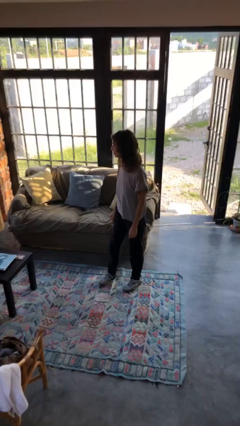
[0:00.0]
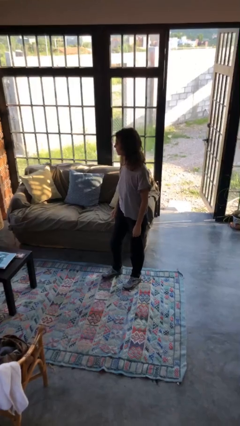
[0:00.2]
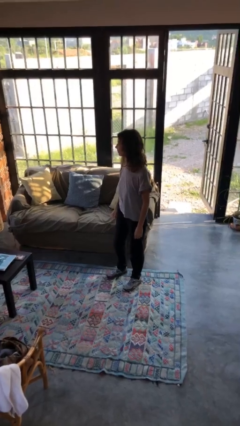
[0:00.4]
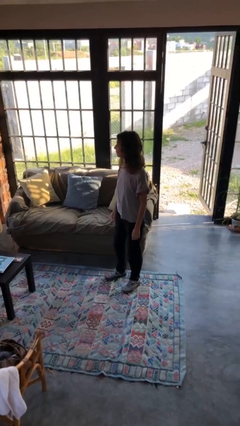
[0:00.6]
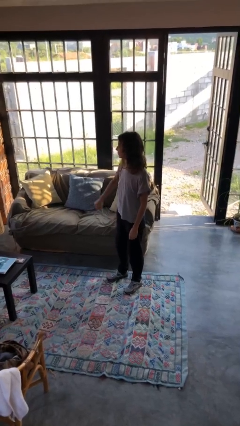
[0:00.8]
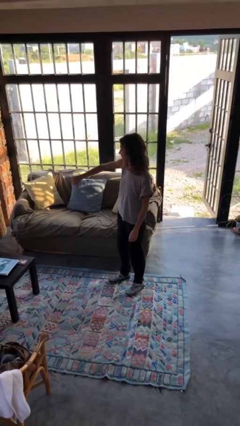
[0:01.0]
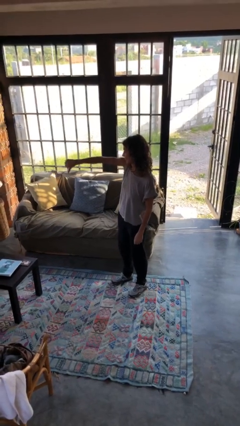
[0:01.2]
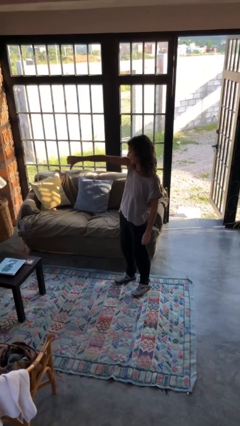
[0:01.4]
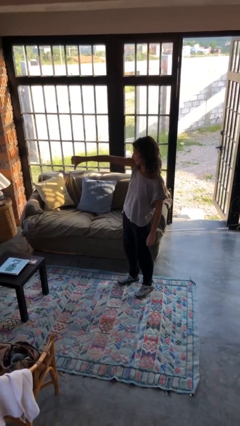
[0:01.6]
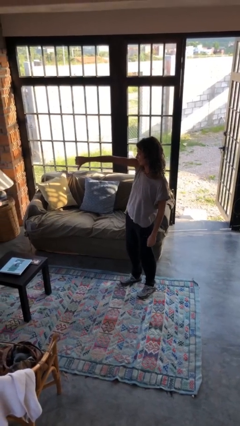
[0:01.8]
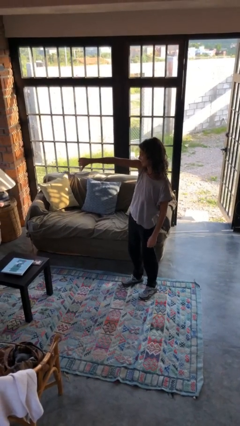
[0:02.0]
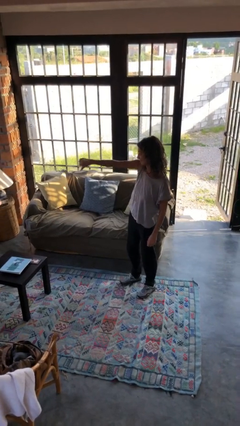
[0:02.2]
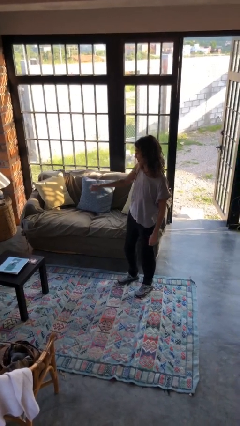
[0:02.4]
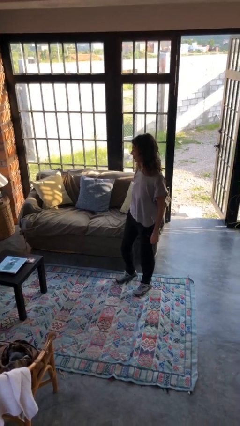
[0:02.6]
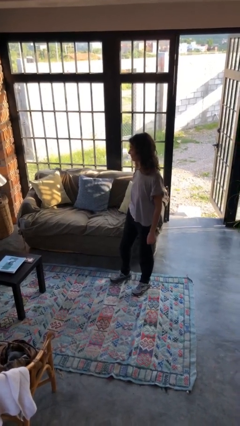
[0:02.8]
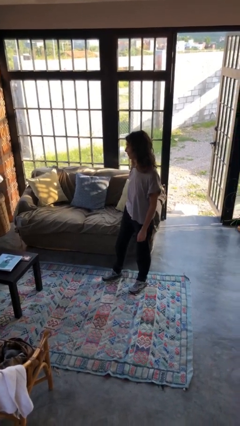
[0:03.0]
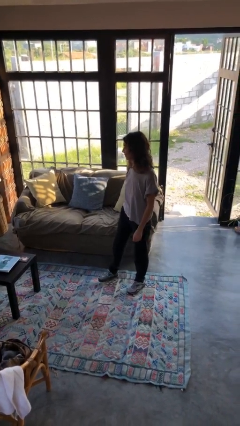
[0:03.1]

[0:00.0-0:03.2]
person gestures thumbs down

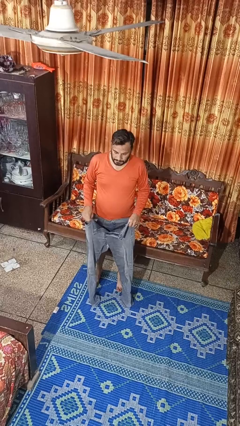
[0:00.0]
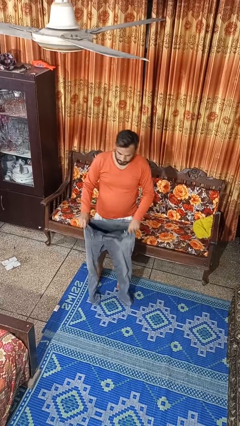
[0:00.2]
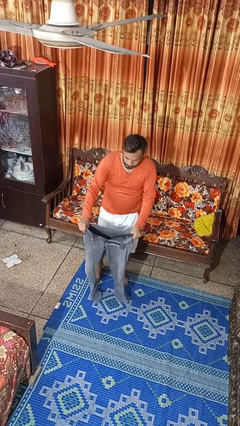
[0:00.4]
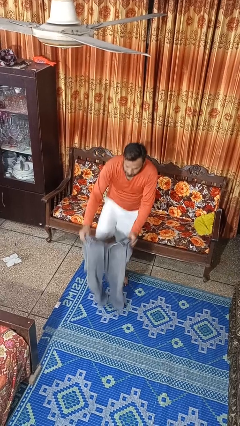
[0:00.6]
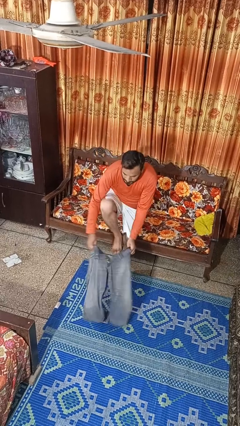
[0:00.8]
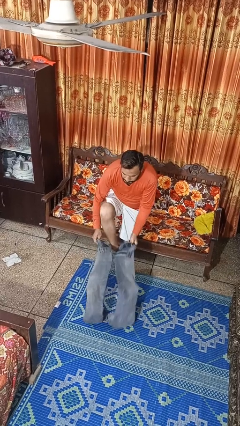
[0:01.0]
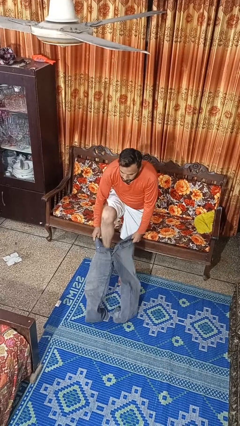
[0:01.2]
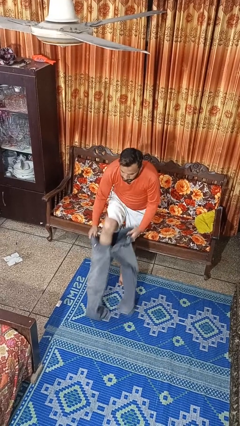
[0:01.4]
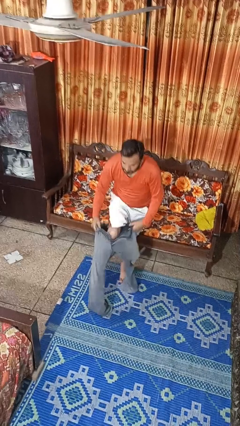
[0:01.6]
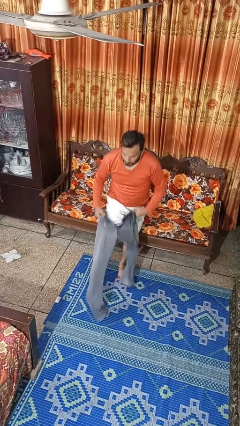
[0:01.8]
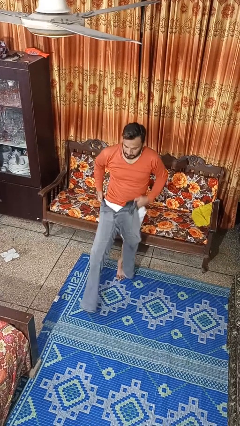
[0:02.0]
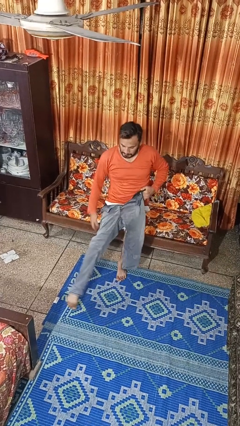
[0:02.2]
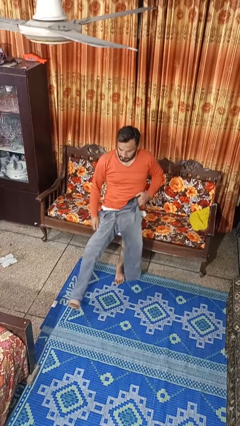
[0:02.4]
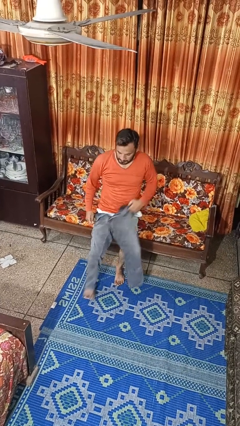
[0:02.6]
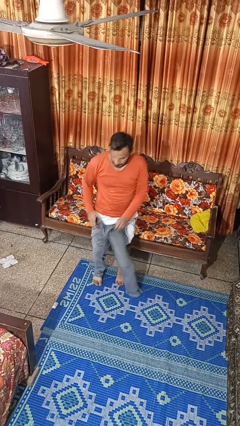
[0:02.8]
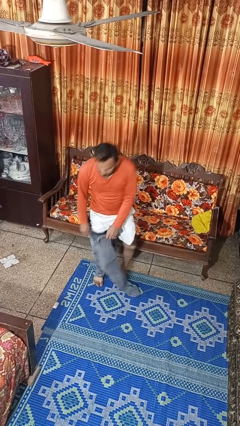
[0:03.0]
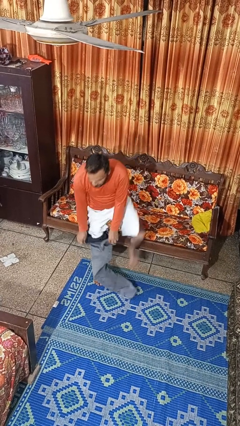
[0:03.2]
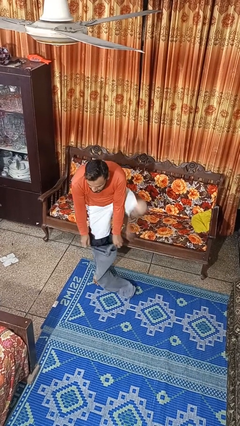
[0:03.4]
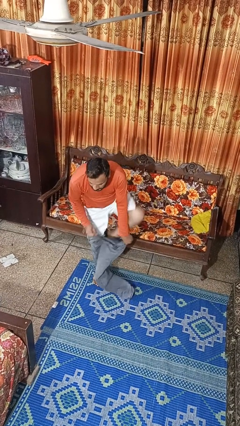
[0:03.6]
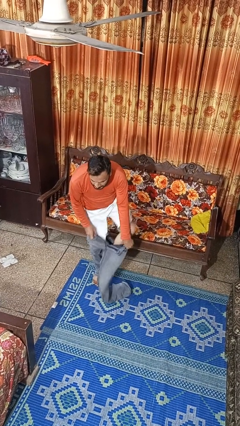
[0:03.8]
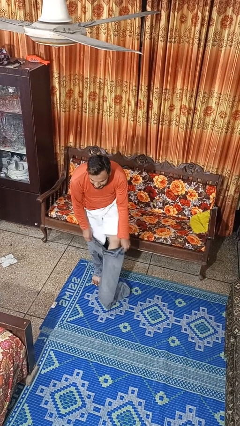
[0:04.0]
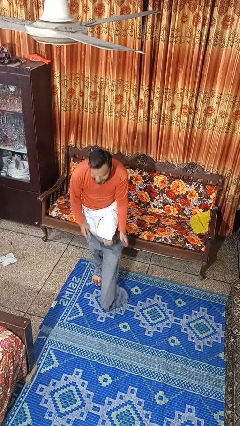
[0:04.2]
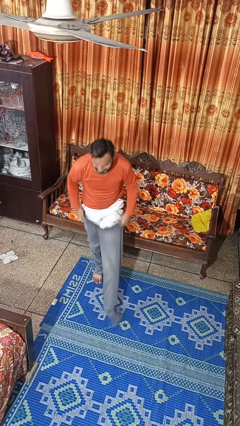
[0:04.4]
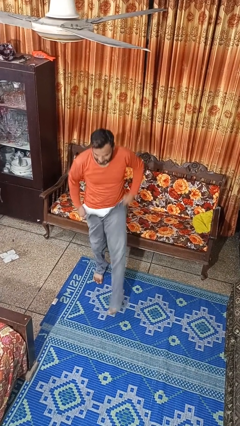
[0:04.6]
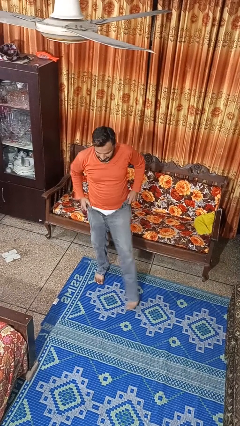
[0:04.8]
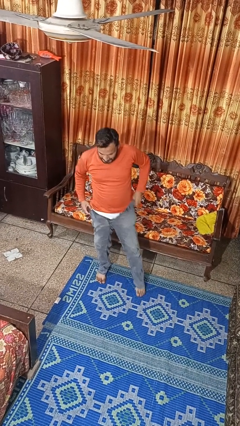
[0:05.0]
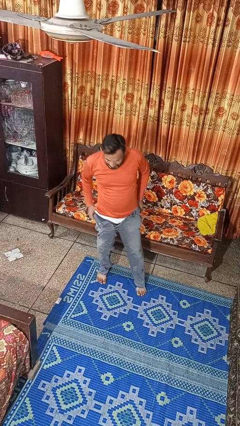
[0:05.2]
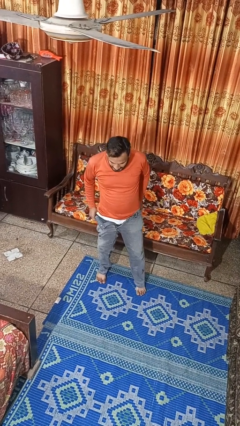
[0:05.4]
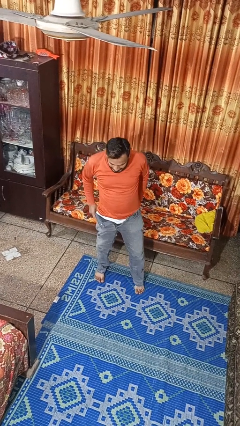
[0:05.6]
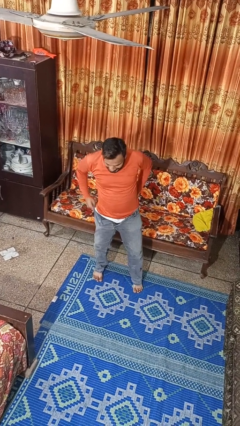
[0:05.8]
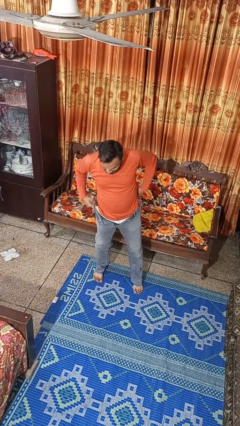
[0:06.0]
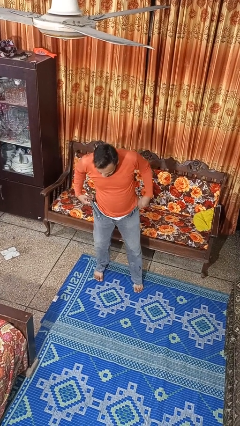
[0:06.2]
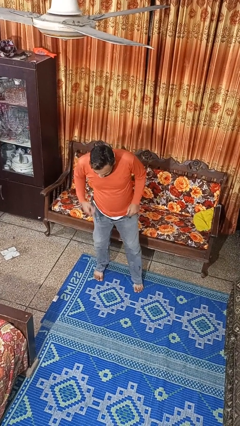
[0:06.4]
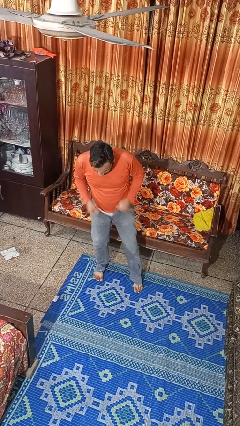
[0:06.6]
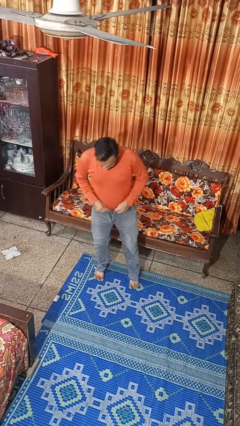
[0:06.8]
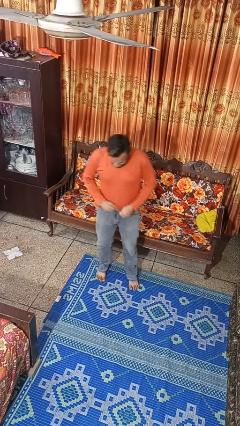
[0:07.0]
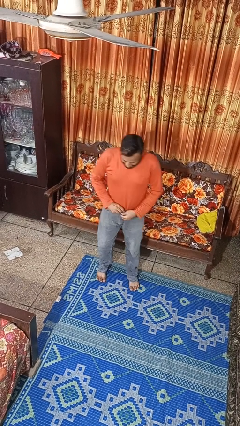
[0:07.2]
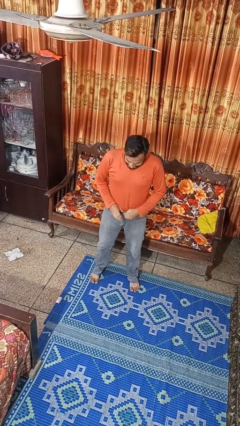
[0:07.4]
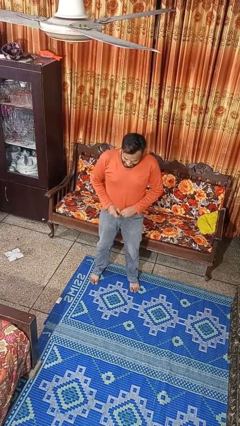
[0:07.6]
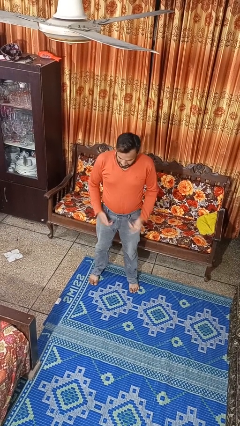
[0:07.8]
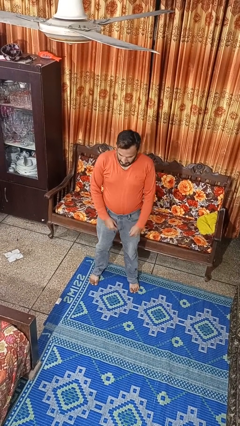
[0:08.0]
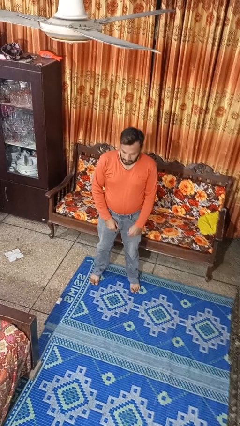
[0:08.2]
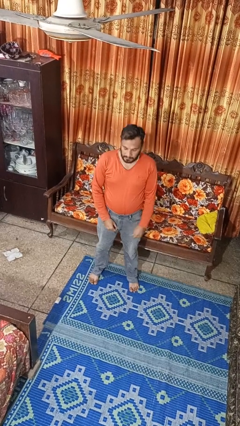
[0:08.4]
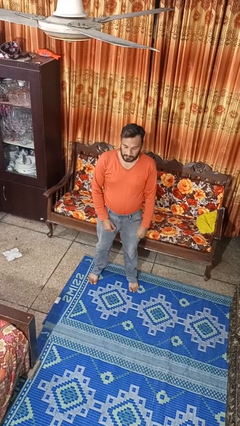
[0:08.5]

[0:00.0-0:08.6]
person puts on pants

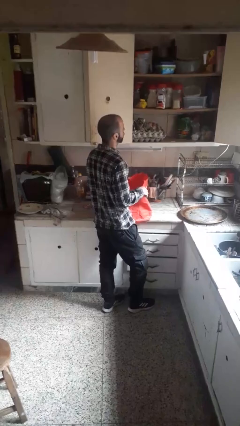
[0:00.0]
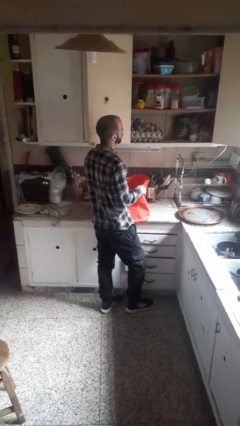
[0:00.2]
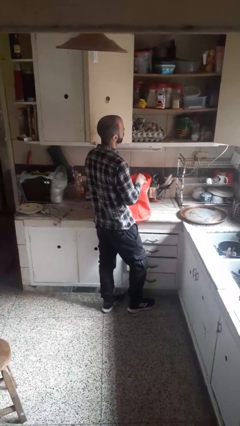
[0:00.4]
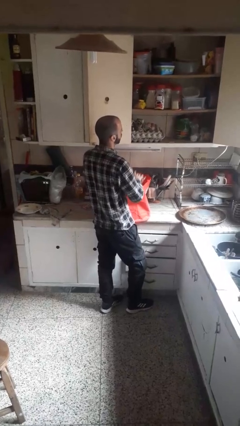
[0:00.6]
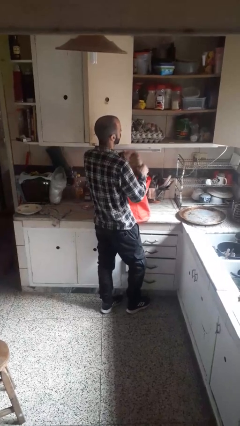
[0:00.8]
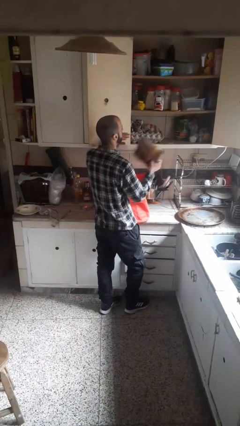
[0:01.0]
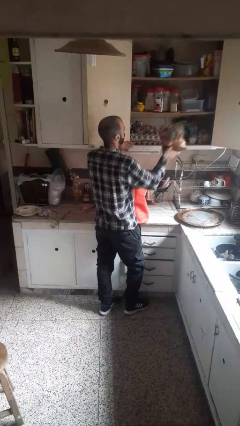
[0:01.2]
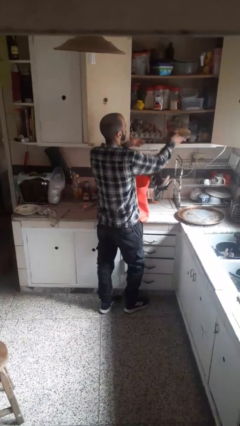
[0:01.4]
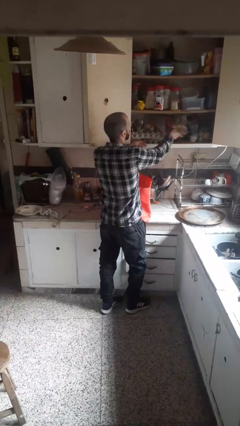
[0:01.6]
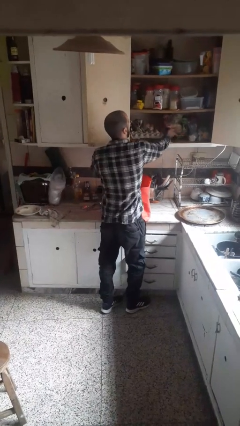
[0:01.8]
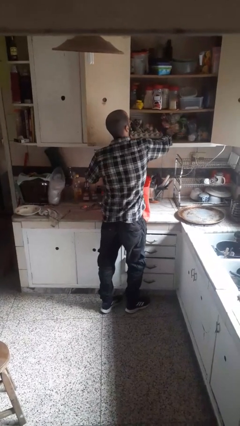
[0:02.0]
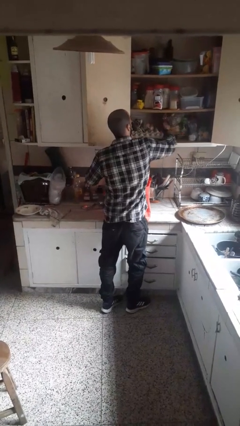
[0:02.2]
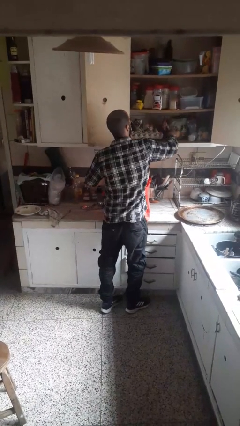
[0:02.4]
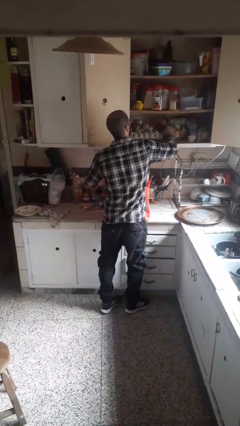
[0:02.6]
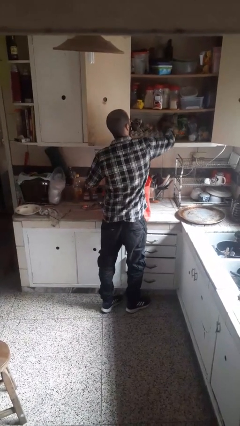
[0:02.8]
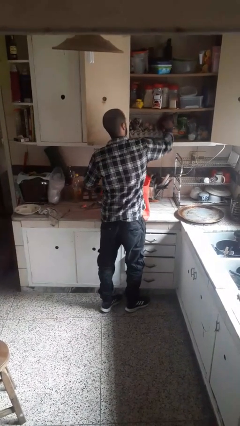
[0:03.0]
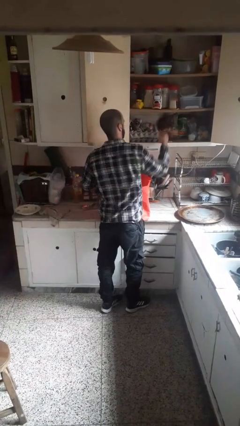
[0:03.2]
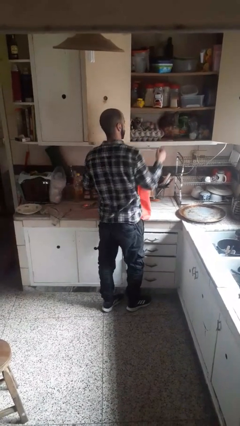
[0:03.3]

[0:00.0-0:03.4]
person loads groceries into cabinet

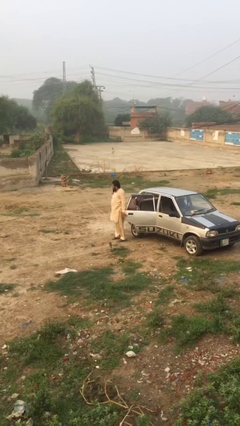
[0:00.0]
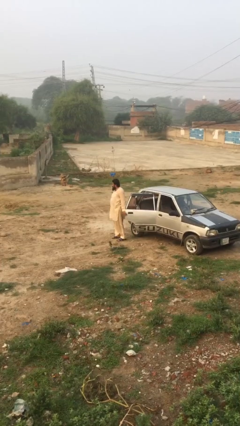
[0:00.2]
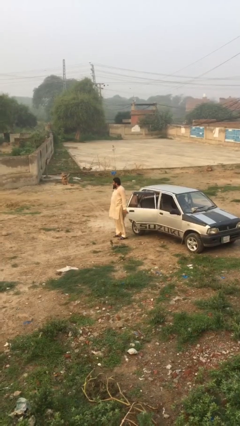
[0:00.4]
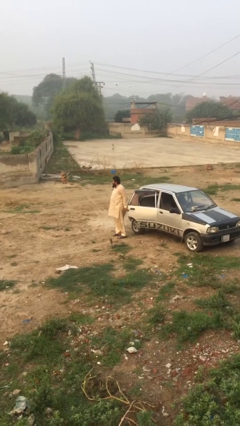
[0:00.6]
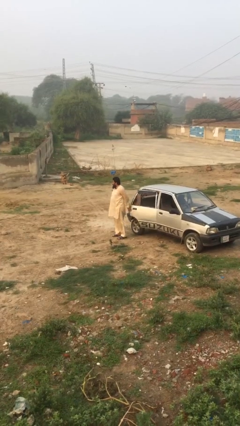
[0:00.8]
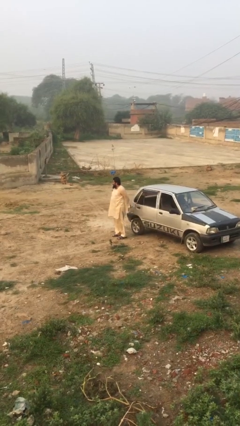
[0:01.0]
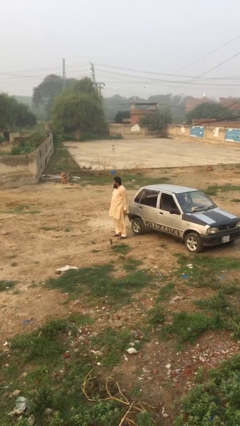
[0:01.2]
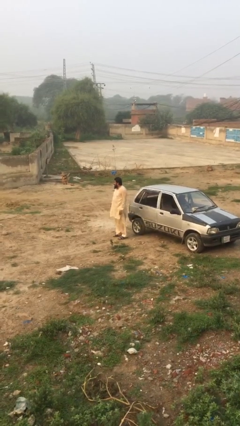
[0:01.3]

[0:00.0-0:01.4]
person closes car door

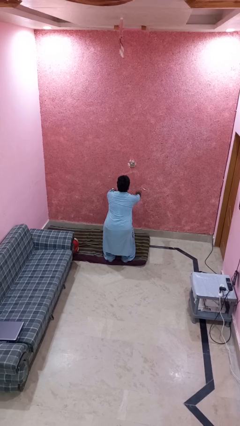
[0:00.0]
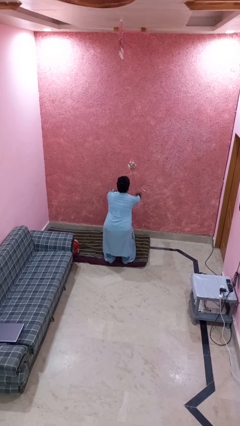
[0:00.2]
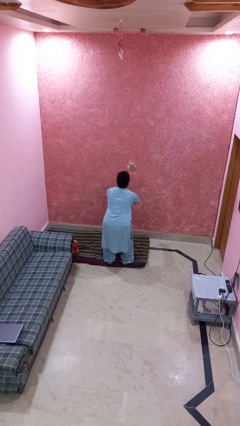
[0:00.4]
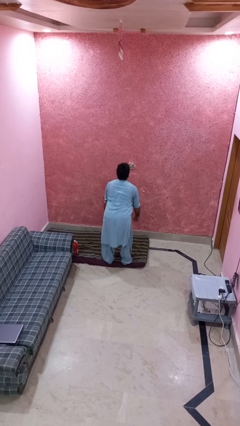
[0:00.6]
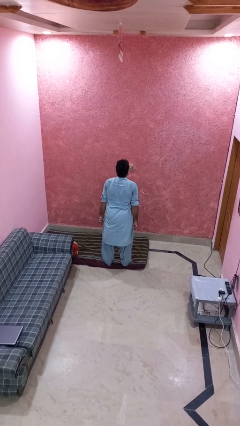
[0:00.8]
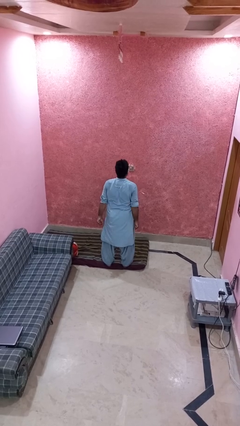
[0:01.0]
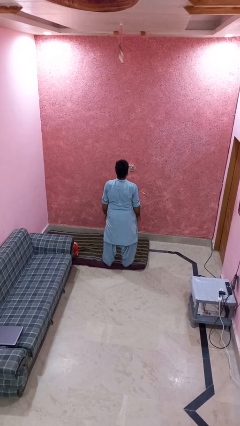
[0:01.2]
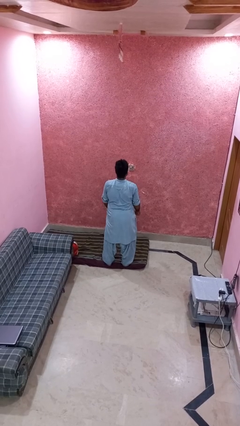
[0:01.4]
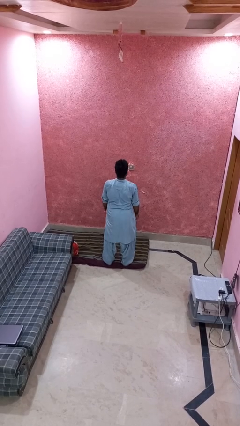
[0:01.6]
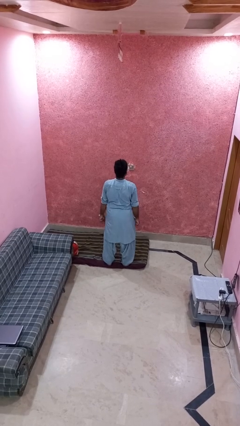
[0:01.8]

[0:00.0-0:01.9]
person stands up
